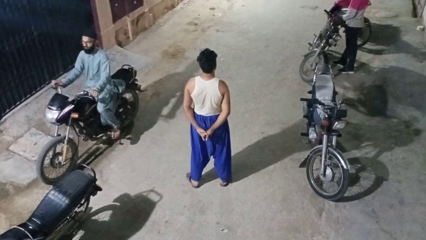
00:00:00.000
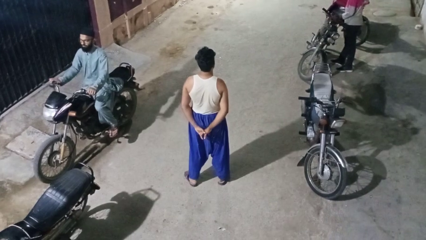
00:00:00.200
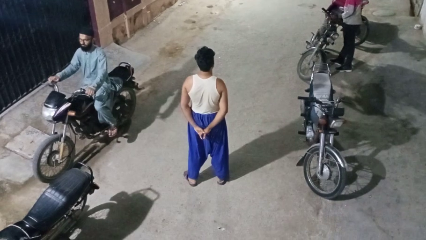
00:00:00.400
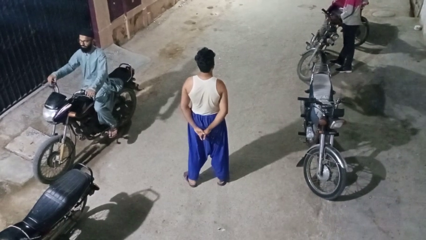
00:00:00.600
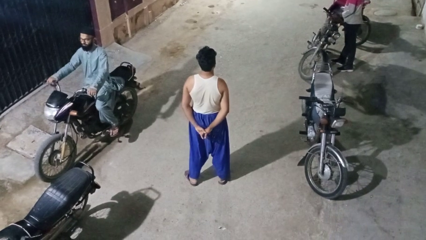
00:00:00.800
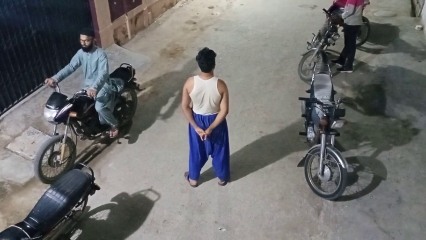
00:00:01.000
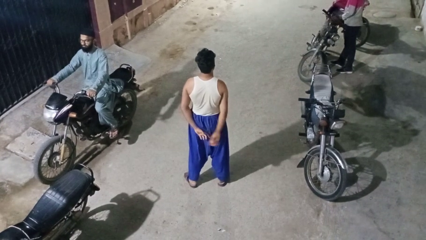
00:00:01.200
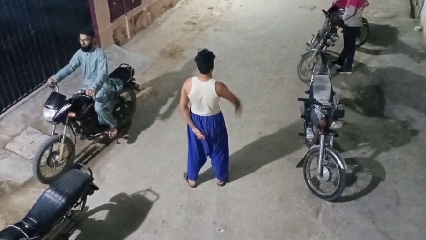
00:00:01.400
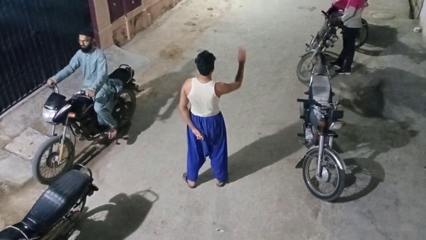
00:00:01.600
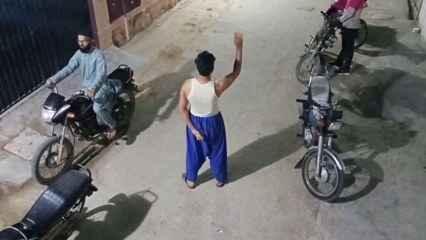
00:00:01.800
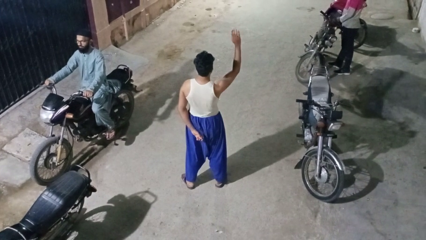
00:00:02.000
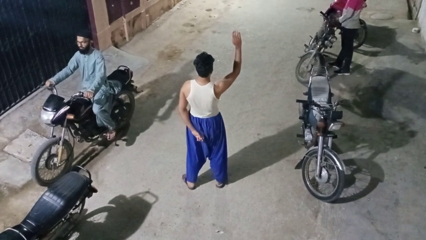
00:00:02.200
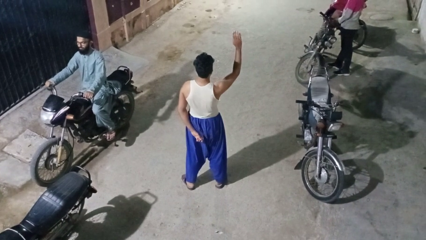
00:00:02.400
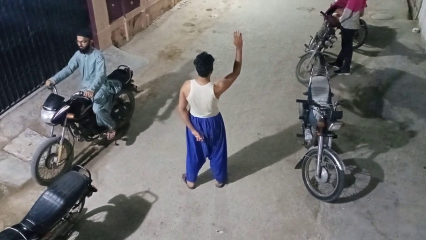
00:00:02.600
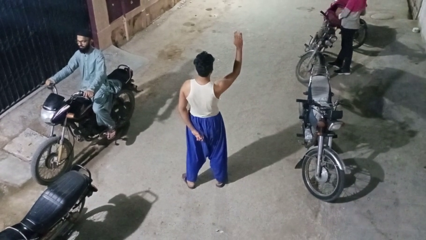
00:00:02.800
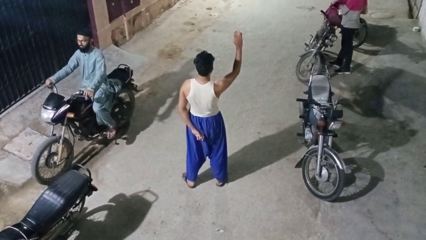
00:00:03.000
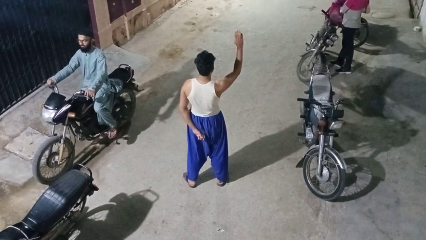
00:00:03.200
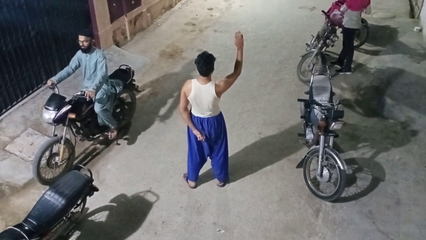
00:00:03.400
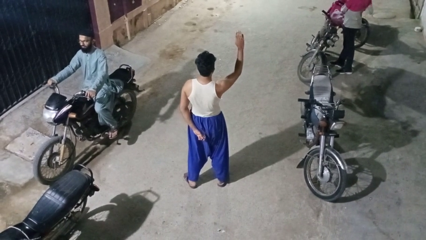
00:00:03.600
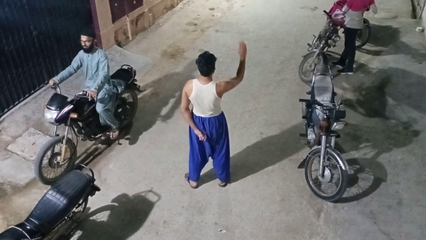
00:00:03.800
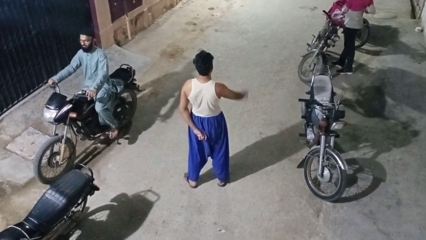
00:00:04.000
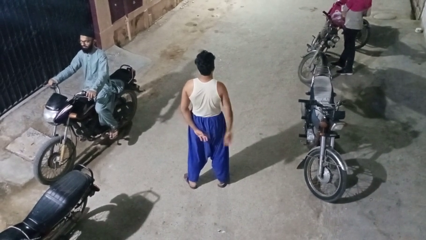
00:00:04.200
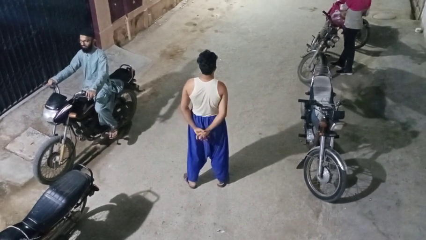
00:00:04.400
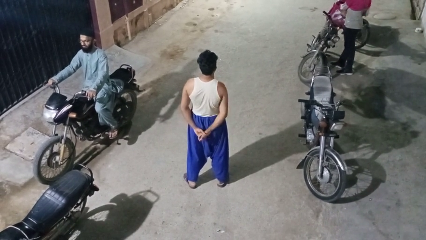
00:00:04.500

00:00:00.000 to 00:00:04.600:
person points at person

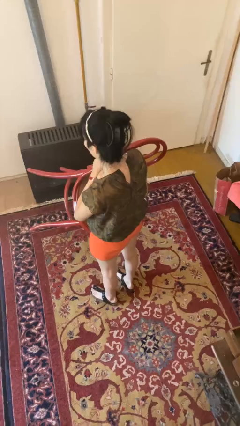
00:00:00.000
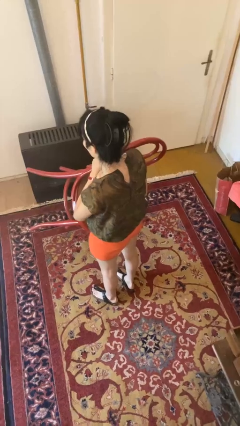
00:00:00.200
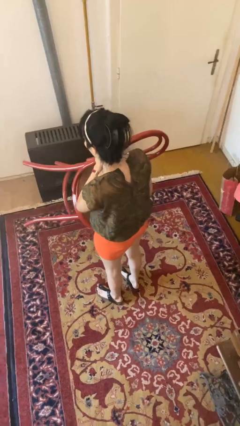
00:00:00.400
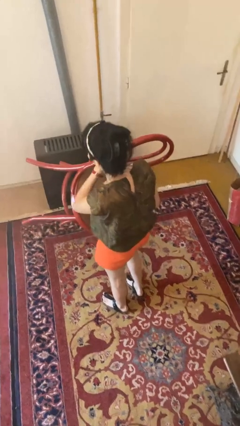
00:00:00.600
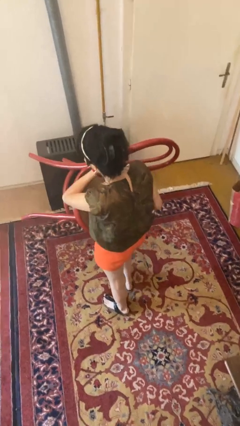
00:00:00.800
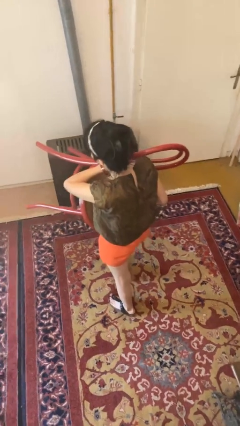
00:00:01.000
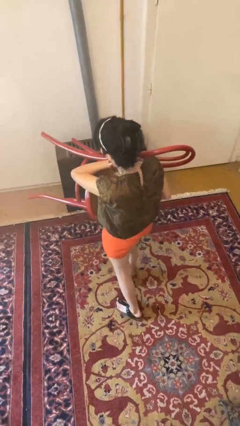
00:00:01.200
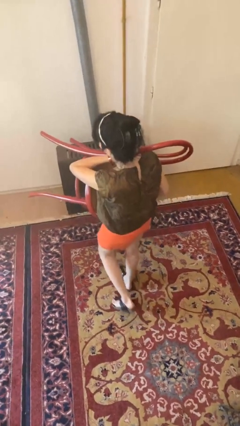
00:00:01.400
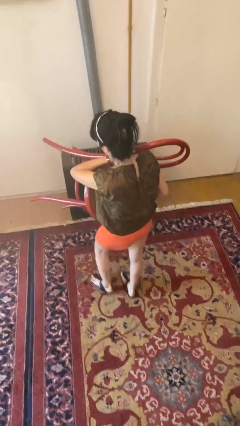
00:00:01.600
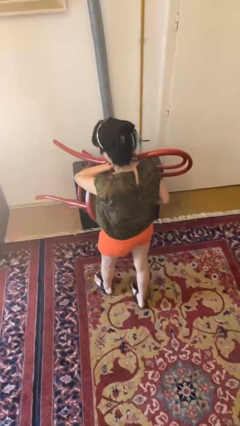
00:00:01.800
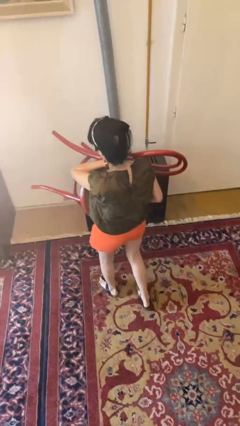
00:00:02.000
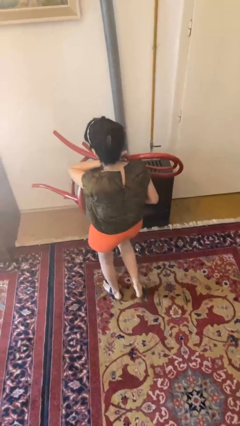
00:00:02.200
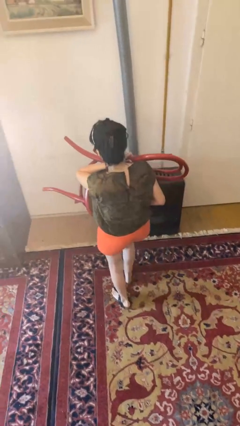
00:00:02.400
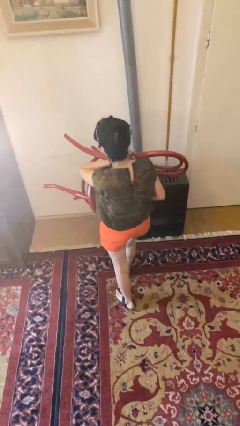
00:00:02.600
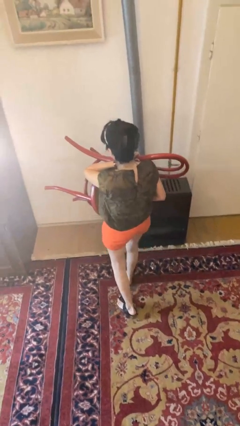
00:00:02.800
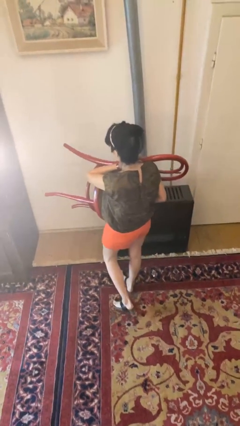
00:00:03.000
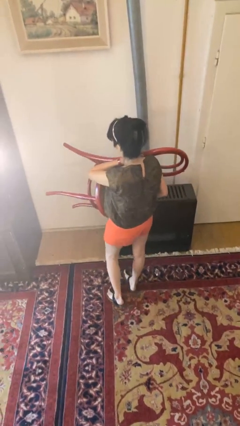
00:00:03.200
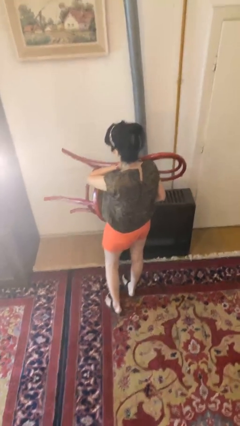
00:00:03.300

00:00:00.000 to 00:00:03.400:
person carries furniture

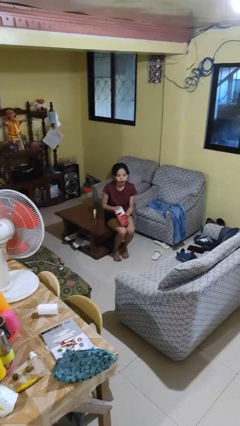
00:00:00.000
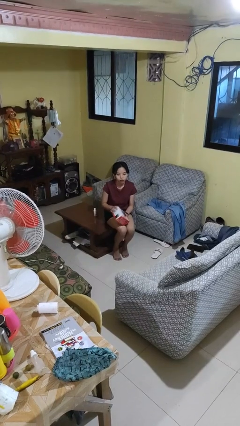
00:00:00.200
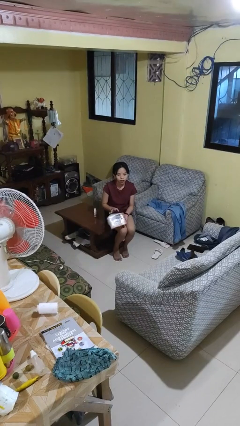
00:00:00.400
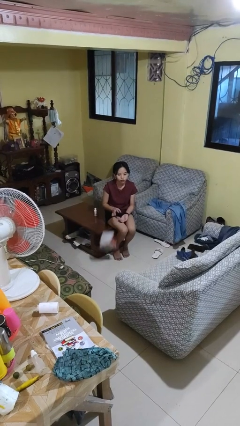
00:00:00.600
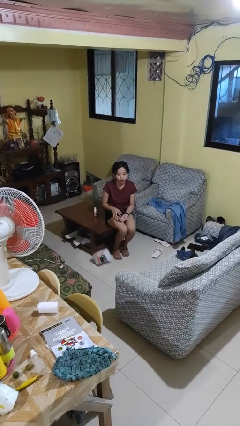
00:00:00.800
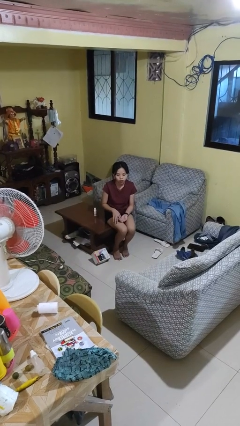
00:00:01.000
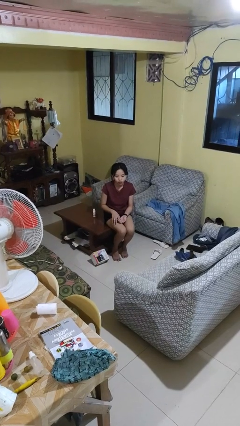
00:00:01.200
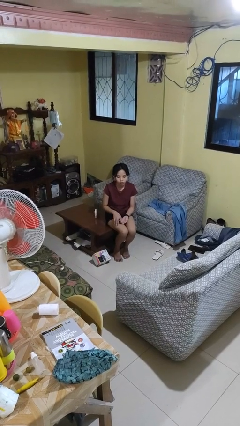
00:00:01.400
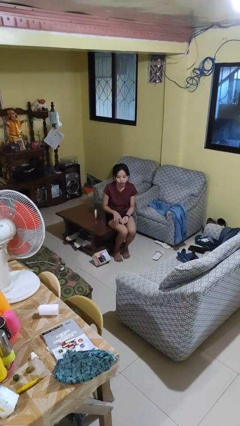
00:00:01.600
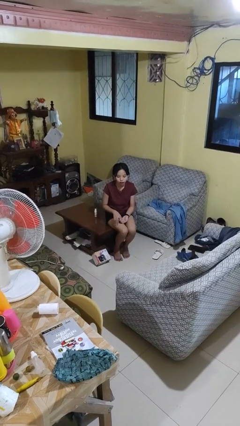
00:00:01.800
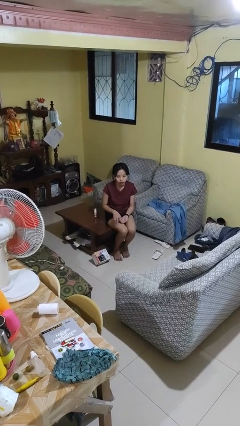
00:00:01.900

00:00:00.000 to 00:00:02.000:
person drops object

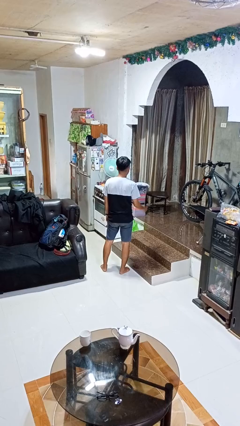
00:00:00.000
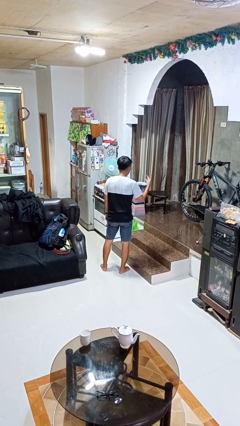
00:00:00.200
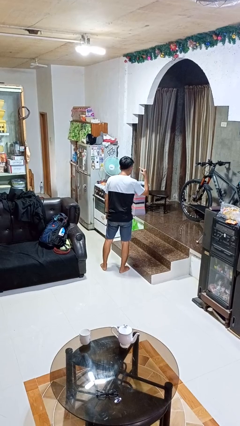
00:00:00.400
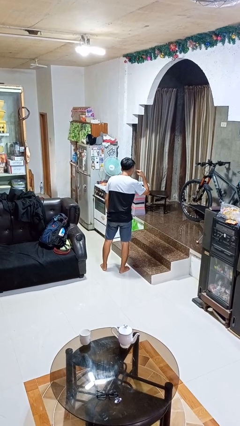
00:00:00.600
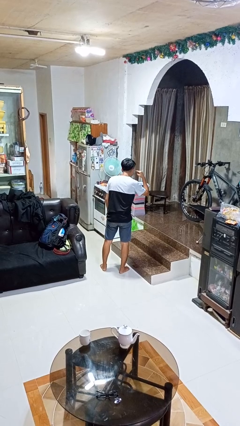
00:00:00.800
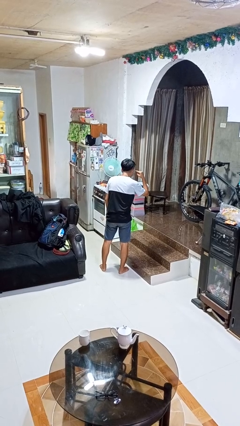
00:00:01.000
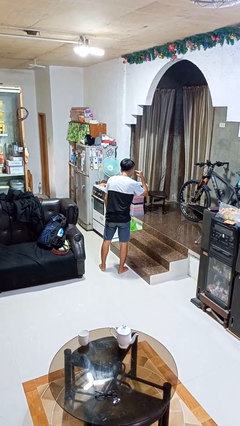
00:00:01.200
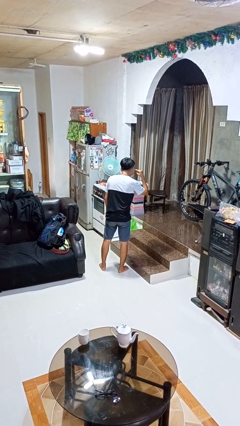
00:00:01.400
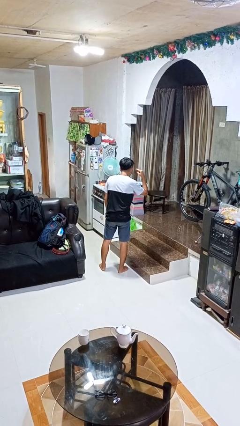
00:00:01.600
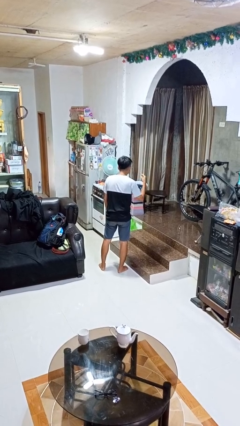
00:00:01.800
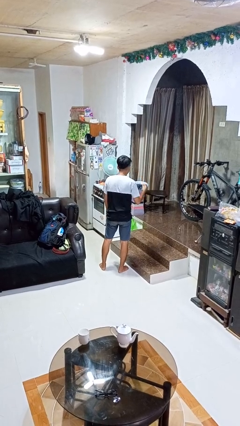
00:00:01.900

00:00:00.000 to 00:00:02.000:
person gestures listen closely

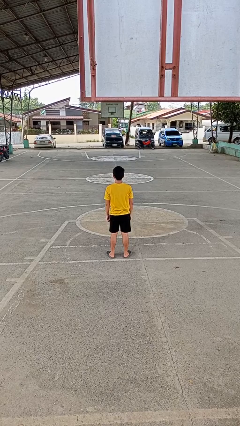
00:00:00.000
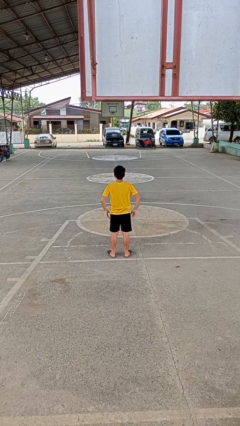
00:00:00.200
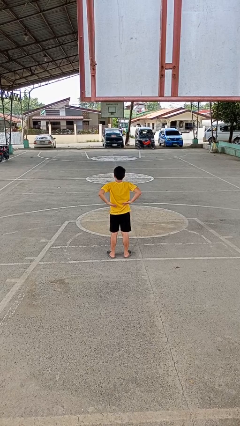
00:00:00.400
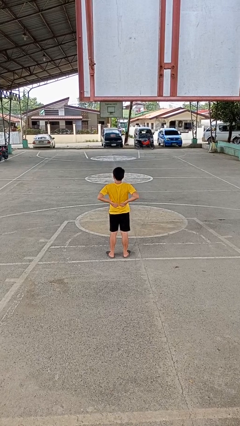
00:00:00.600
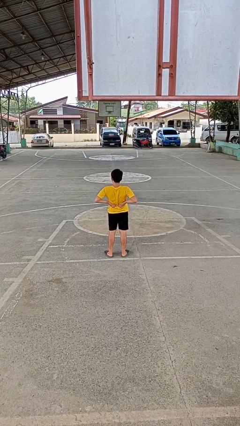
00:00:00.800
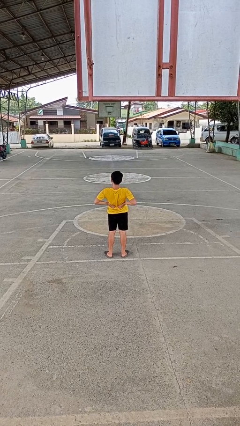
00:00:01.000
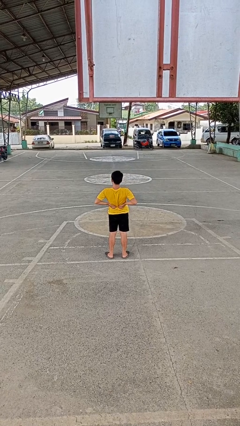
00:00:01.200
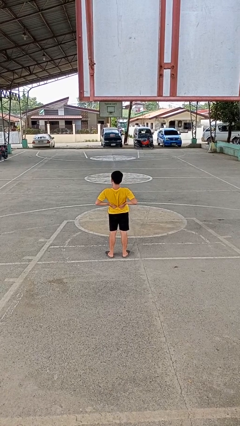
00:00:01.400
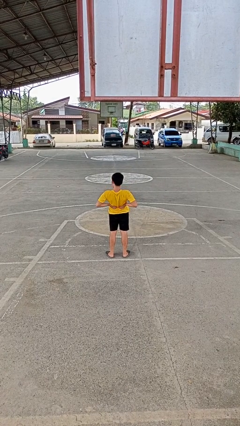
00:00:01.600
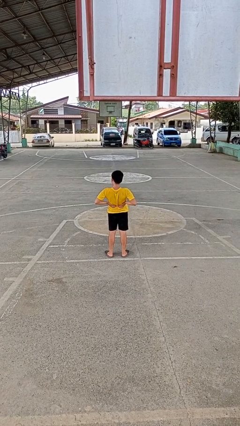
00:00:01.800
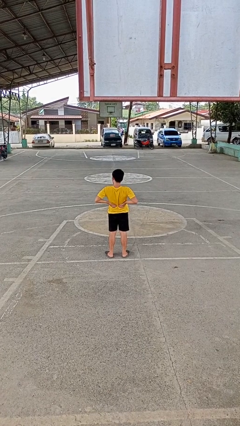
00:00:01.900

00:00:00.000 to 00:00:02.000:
person stretches back

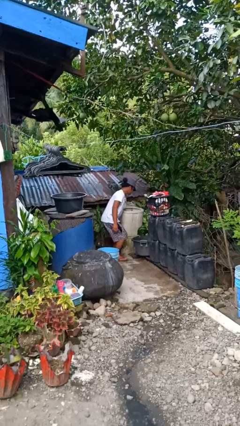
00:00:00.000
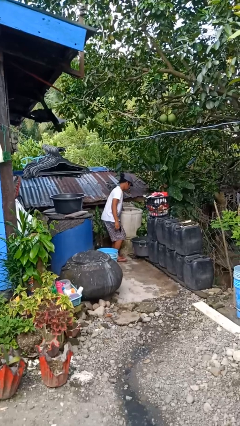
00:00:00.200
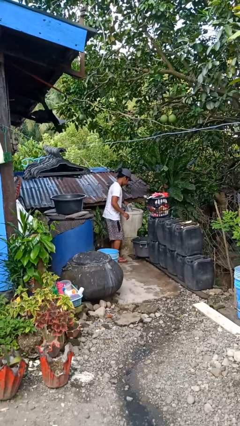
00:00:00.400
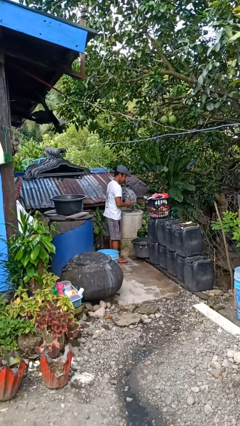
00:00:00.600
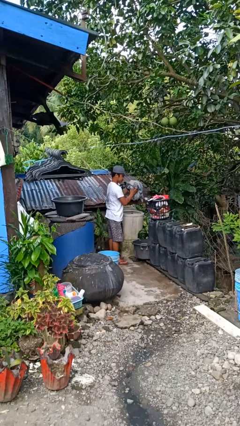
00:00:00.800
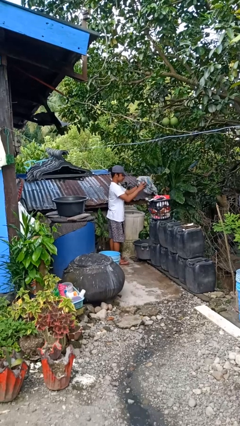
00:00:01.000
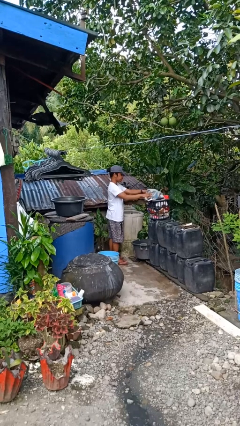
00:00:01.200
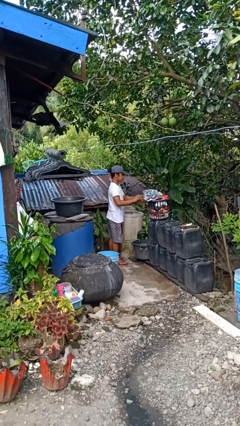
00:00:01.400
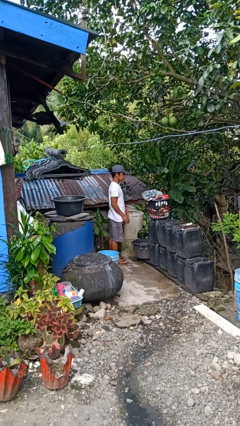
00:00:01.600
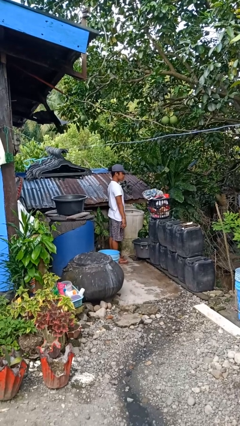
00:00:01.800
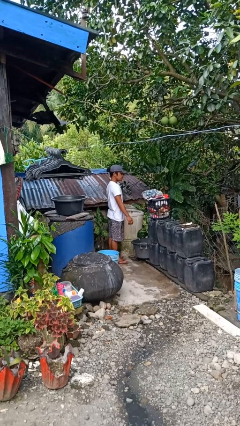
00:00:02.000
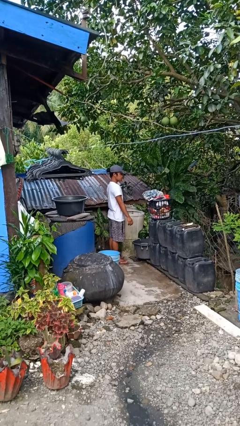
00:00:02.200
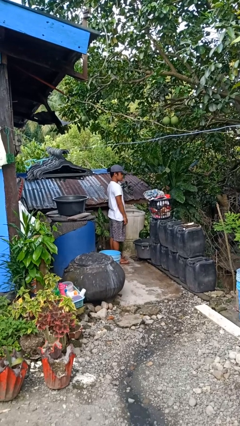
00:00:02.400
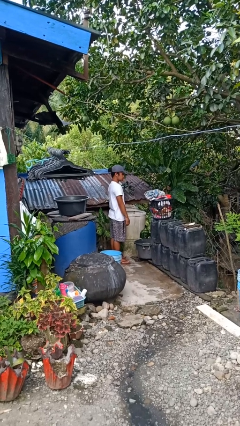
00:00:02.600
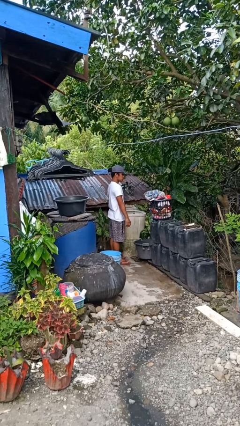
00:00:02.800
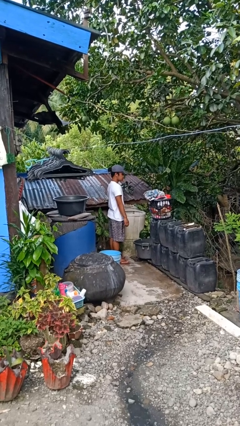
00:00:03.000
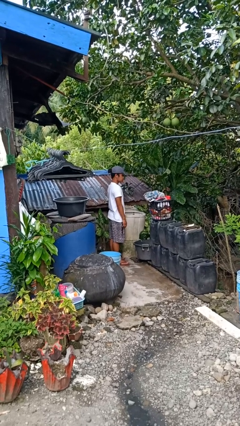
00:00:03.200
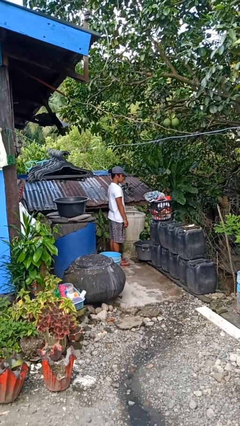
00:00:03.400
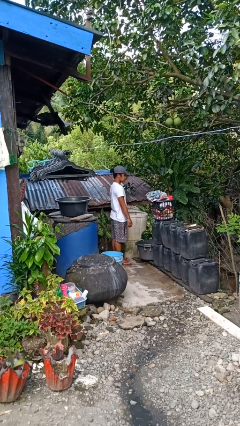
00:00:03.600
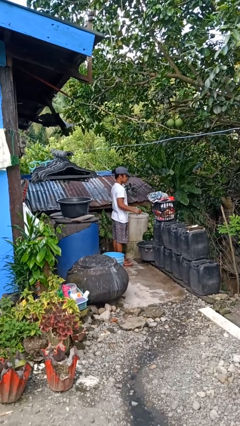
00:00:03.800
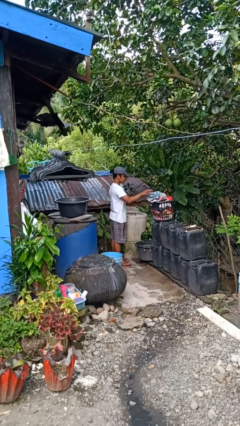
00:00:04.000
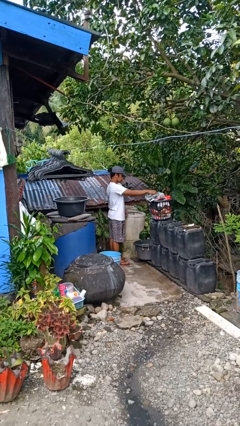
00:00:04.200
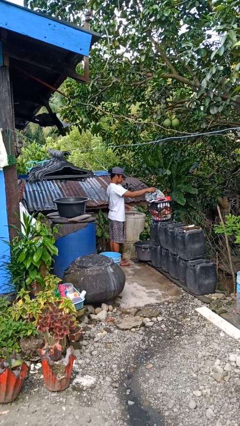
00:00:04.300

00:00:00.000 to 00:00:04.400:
person unloads clotheswasher
